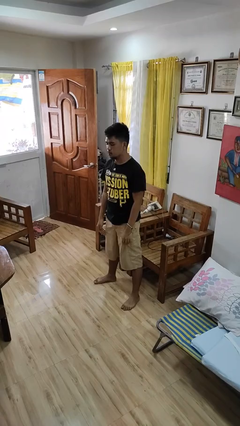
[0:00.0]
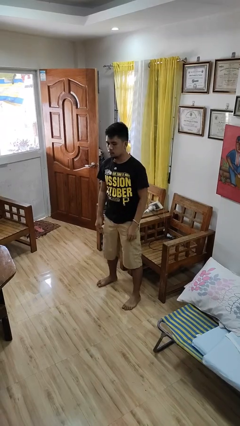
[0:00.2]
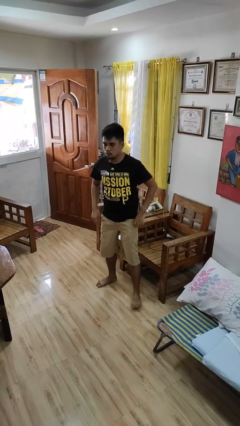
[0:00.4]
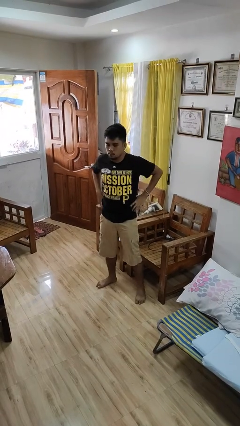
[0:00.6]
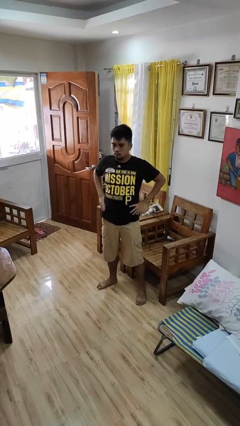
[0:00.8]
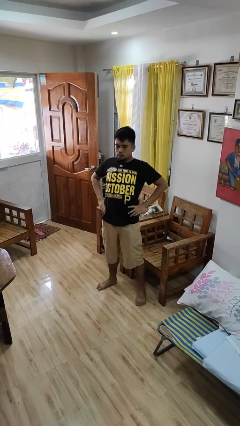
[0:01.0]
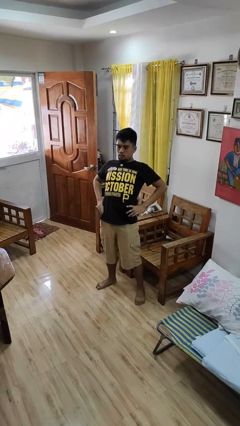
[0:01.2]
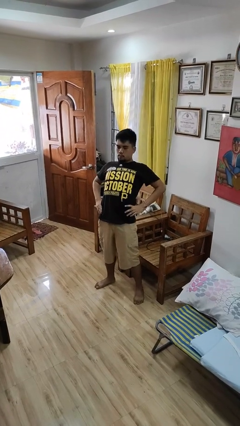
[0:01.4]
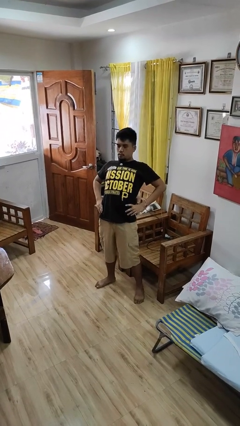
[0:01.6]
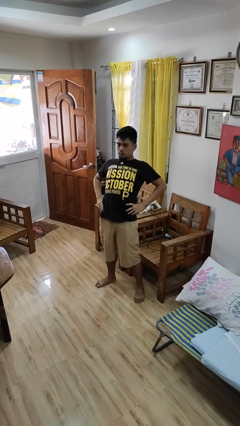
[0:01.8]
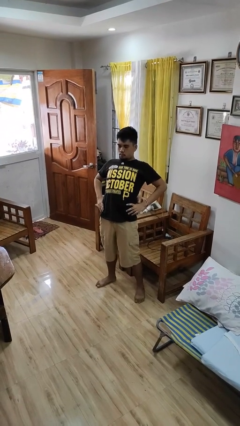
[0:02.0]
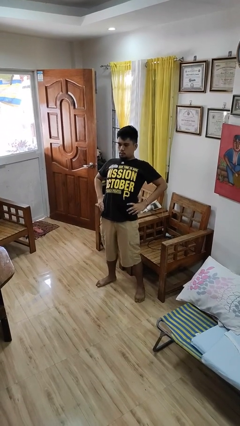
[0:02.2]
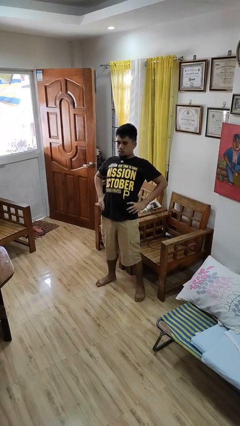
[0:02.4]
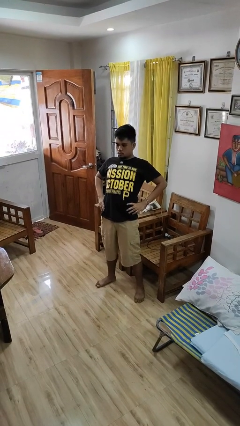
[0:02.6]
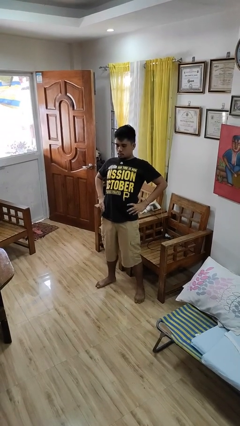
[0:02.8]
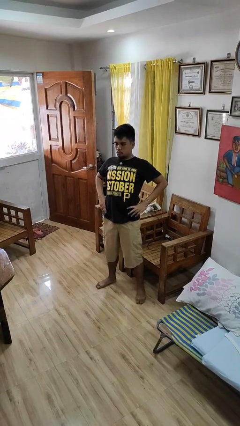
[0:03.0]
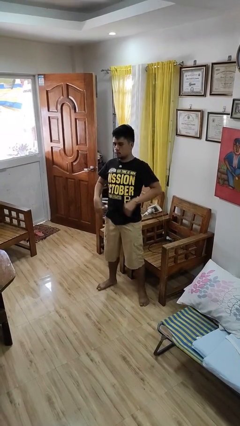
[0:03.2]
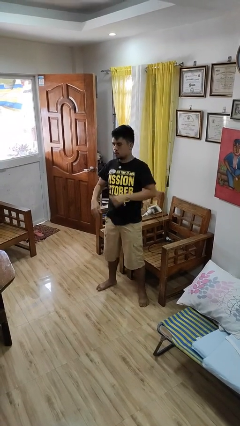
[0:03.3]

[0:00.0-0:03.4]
person stretches back

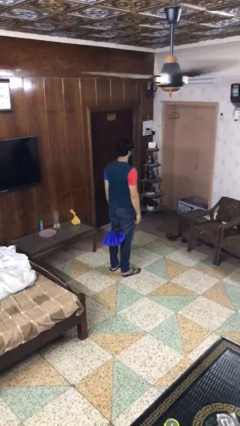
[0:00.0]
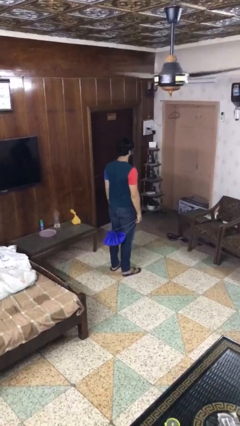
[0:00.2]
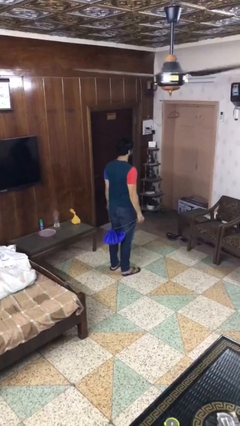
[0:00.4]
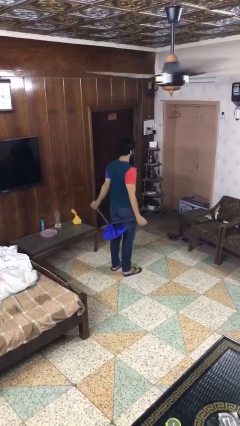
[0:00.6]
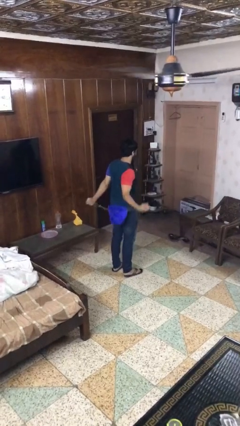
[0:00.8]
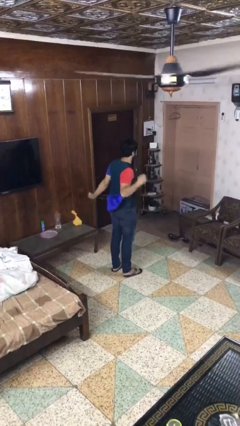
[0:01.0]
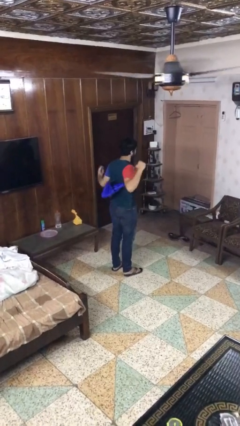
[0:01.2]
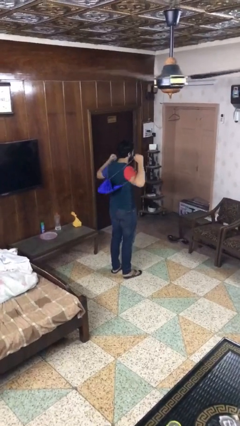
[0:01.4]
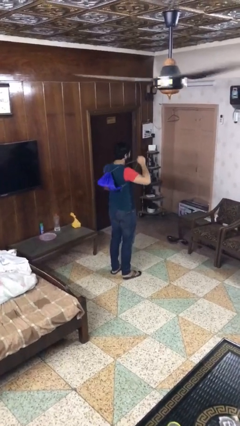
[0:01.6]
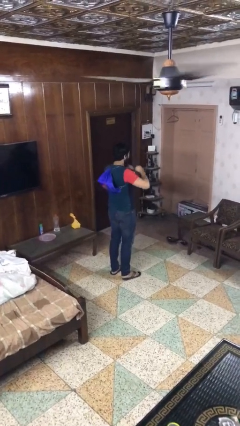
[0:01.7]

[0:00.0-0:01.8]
person puts on backpack

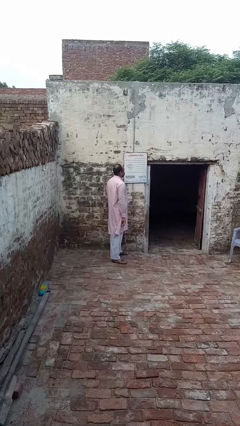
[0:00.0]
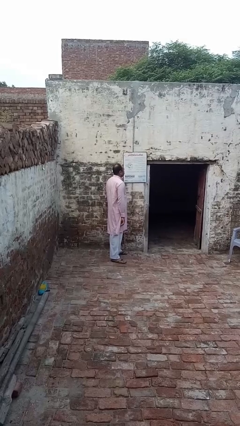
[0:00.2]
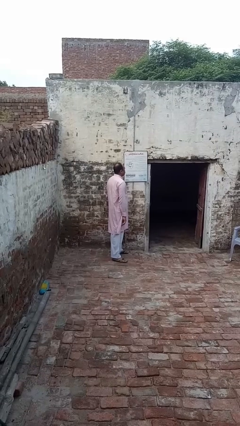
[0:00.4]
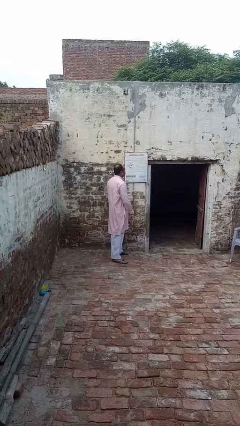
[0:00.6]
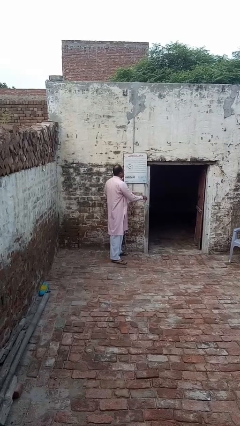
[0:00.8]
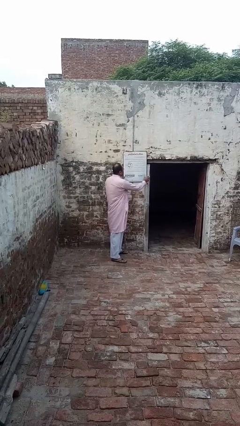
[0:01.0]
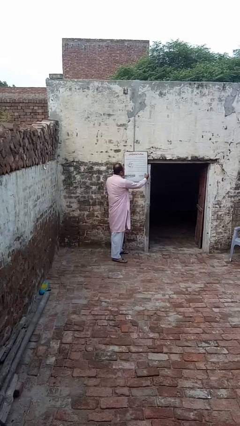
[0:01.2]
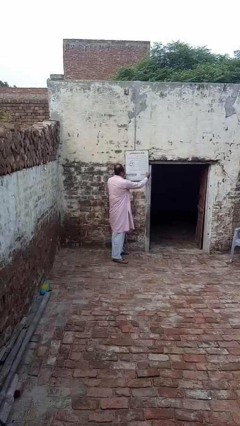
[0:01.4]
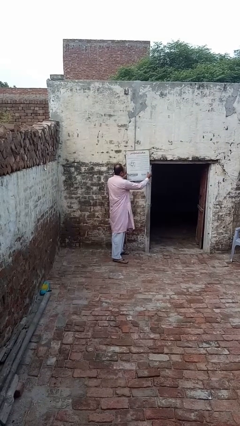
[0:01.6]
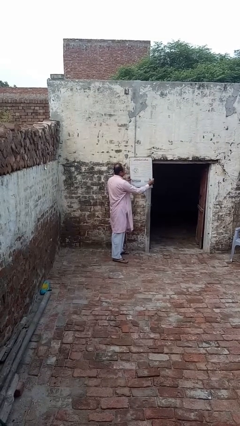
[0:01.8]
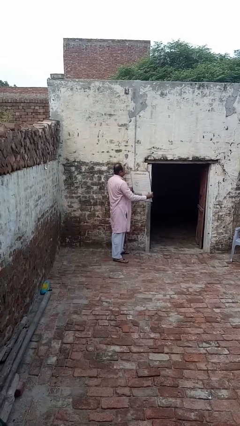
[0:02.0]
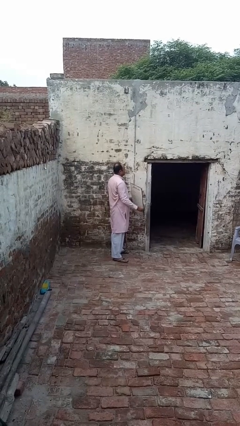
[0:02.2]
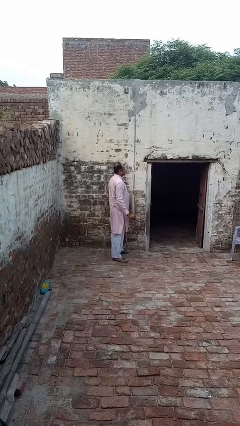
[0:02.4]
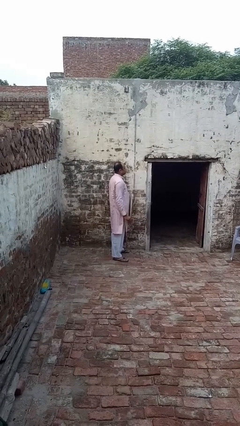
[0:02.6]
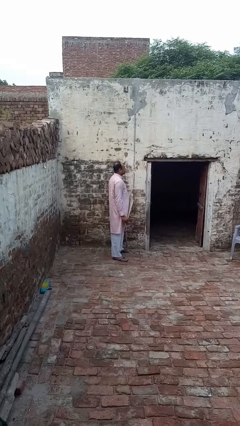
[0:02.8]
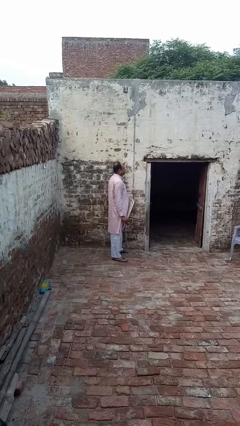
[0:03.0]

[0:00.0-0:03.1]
person takes down picture frame

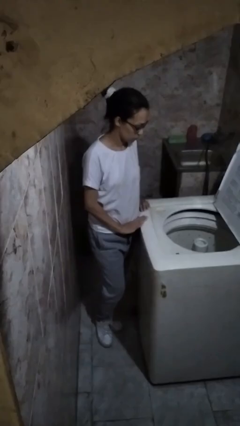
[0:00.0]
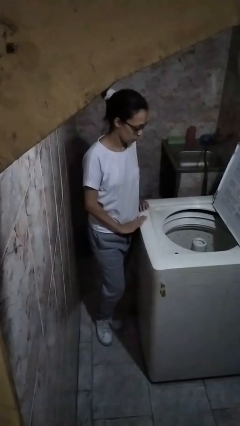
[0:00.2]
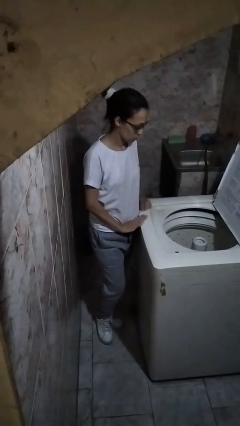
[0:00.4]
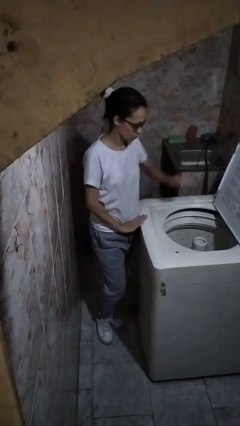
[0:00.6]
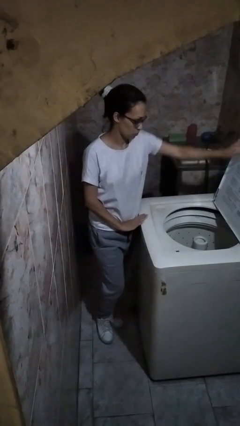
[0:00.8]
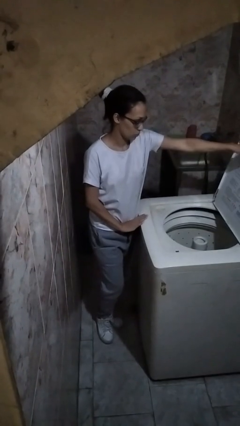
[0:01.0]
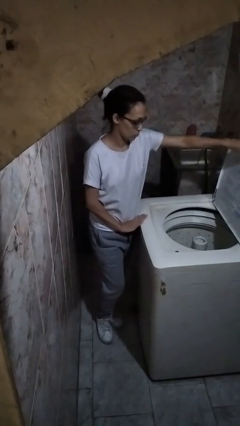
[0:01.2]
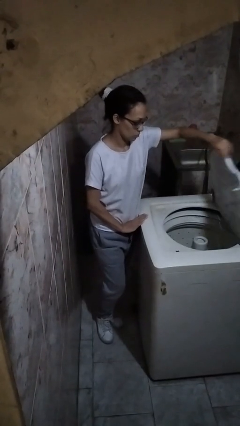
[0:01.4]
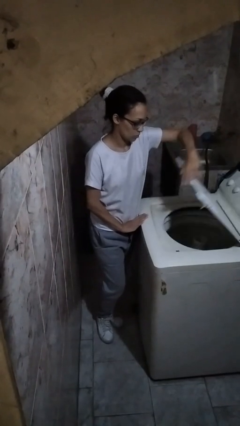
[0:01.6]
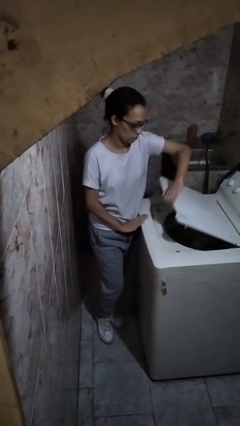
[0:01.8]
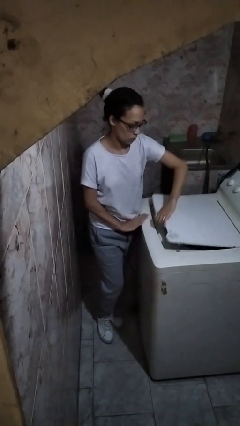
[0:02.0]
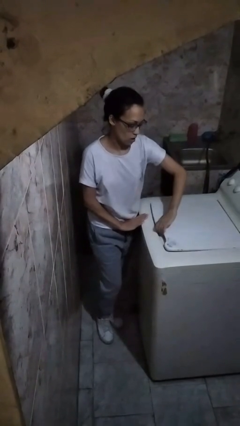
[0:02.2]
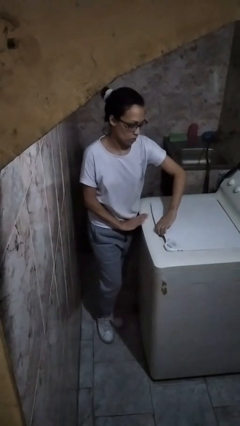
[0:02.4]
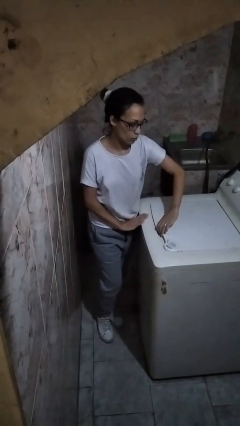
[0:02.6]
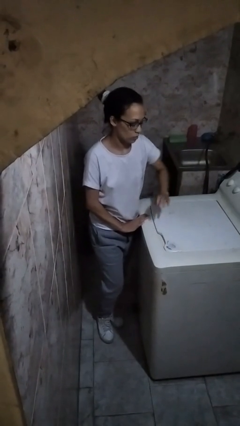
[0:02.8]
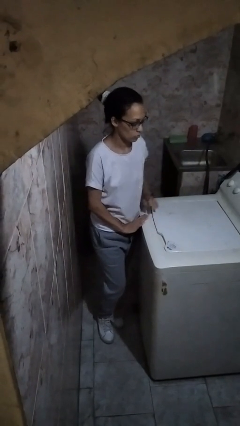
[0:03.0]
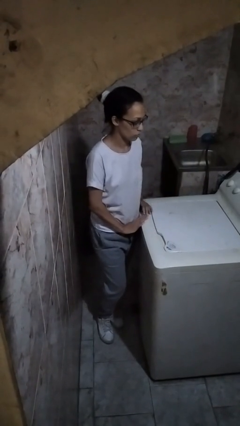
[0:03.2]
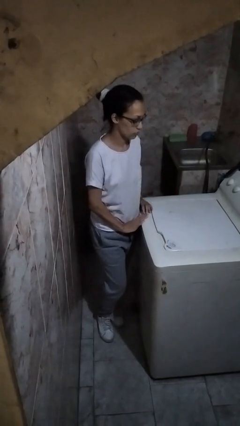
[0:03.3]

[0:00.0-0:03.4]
person closes clothes washer

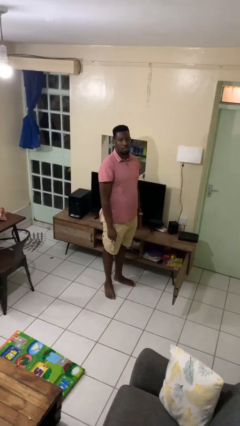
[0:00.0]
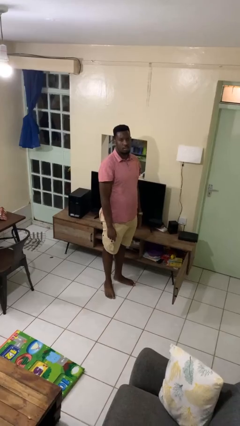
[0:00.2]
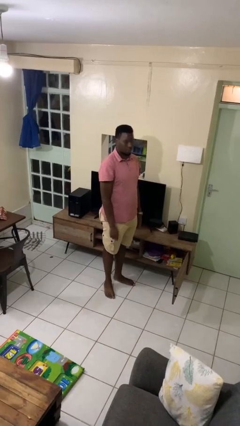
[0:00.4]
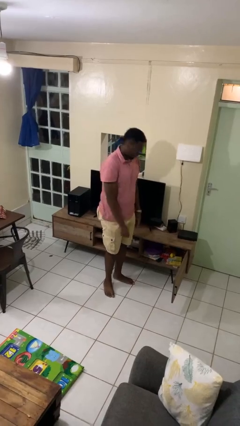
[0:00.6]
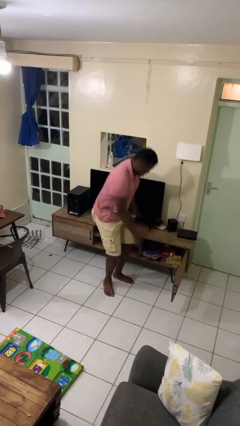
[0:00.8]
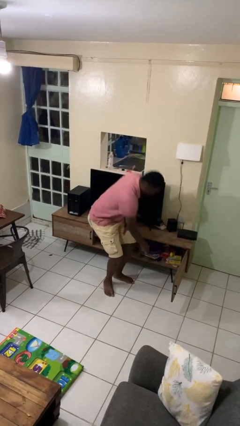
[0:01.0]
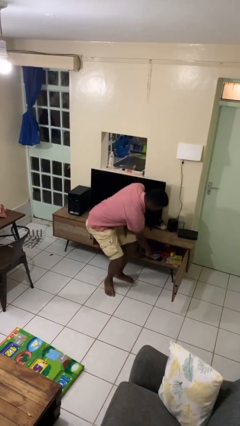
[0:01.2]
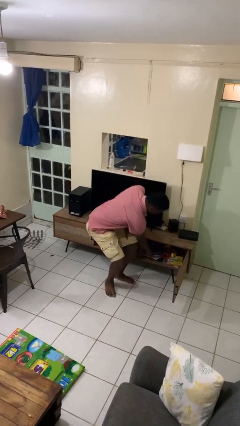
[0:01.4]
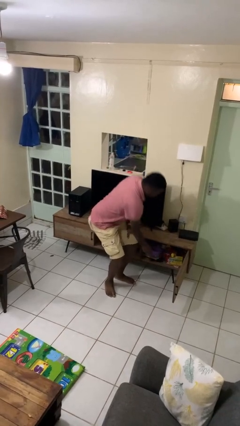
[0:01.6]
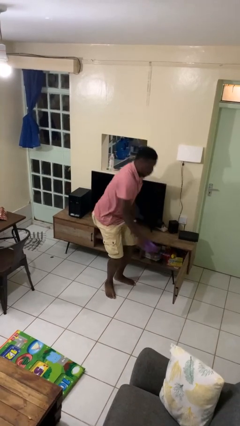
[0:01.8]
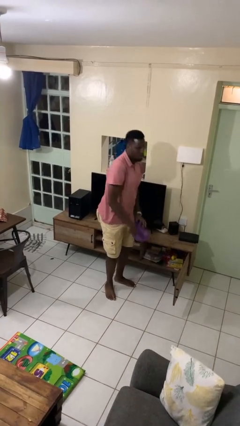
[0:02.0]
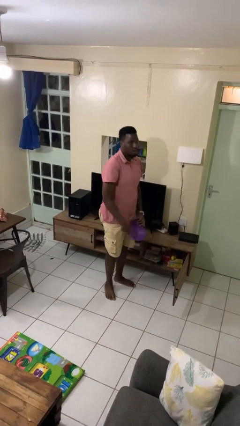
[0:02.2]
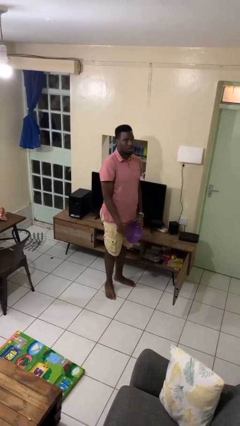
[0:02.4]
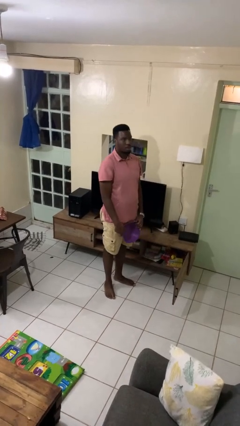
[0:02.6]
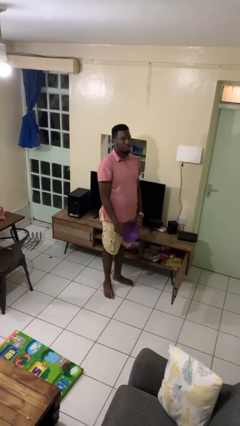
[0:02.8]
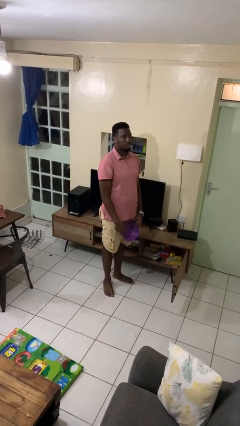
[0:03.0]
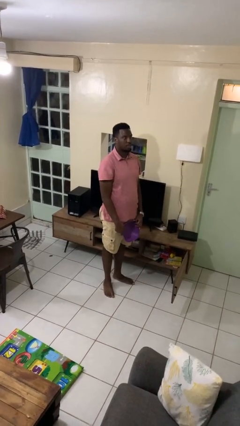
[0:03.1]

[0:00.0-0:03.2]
person picks up object from cabinet

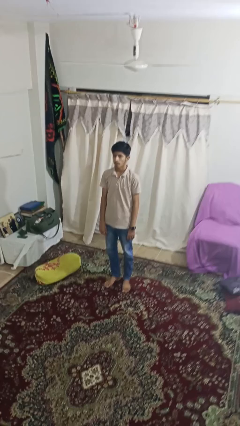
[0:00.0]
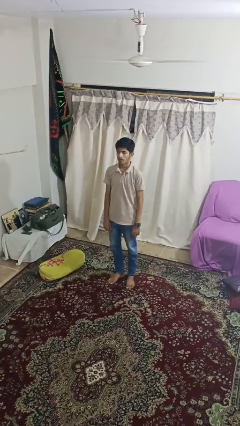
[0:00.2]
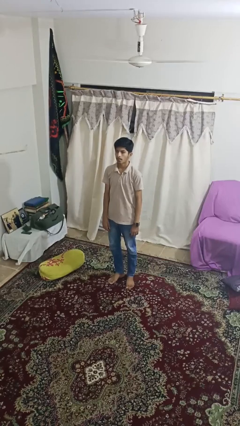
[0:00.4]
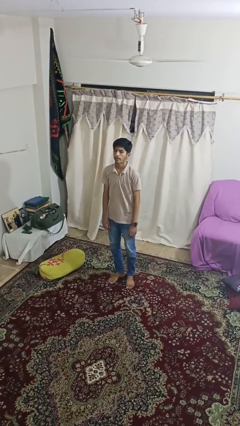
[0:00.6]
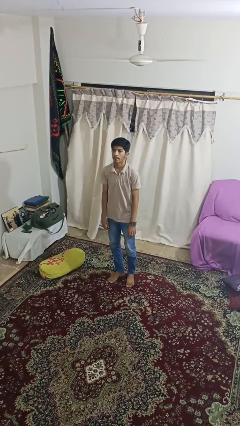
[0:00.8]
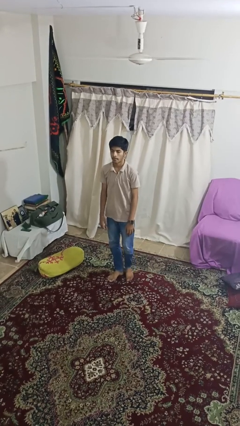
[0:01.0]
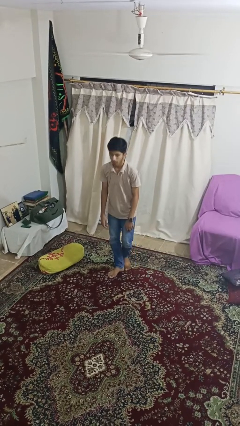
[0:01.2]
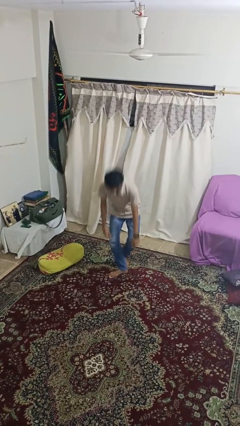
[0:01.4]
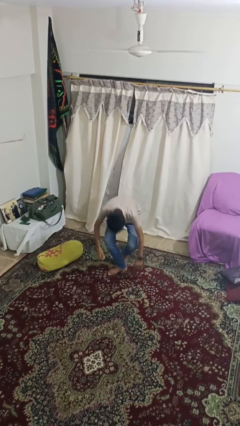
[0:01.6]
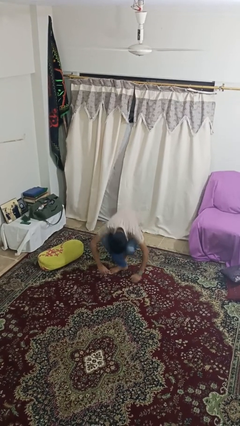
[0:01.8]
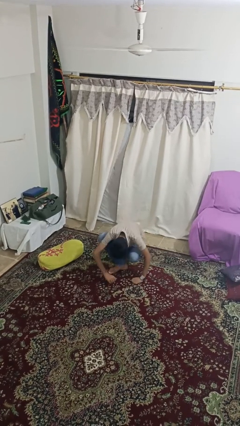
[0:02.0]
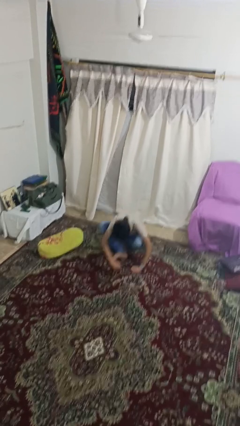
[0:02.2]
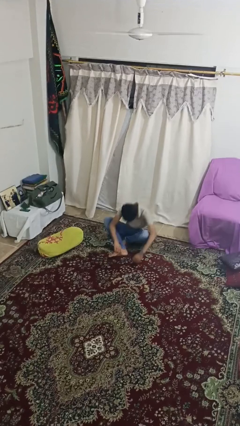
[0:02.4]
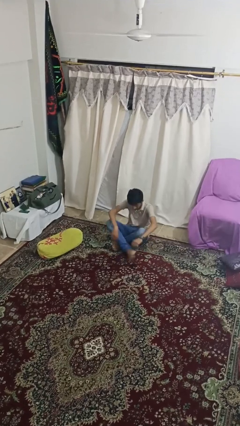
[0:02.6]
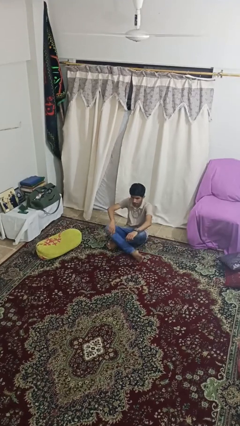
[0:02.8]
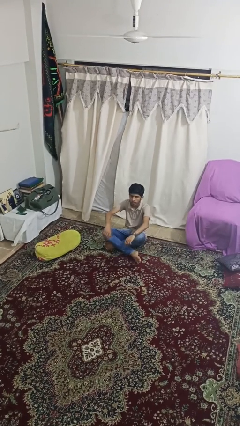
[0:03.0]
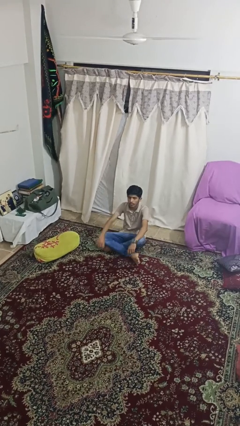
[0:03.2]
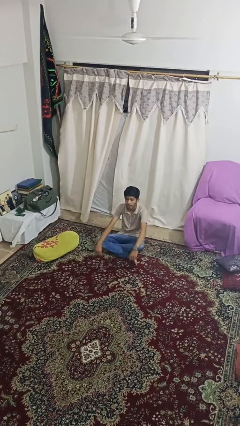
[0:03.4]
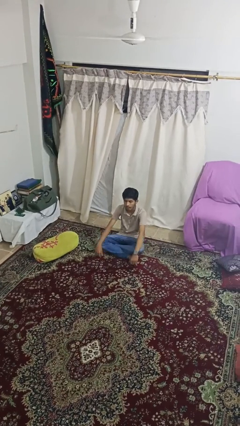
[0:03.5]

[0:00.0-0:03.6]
person sits crisscross
